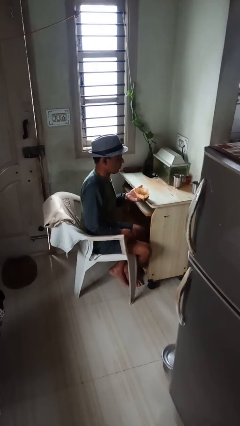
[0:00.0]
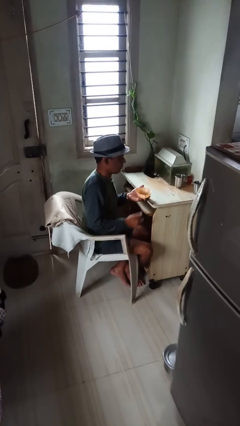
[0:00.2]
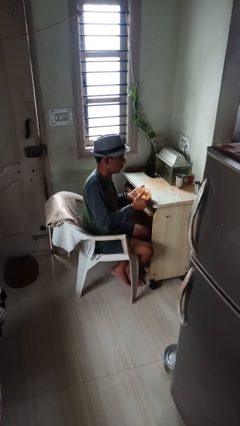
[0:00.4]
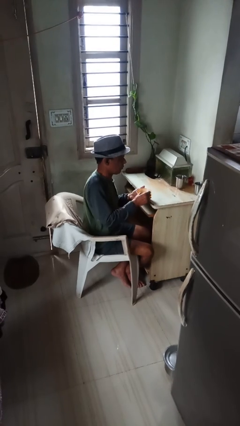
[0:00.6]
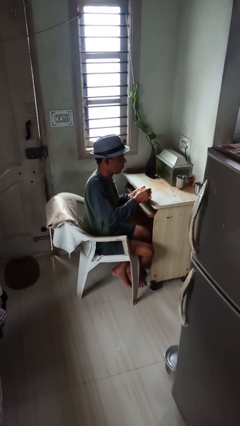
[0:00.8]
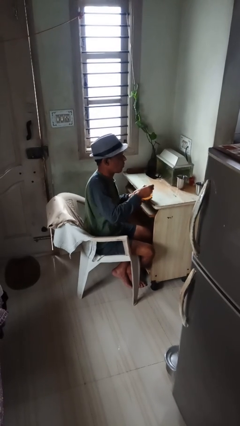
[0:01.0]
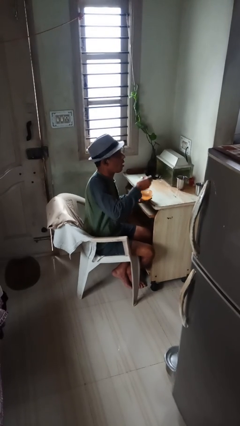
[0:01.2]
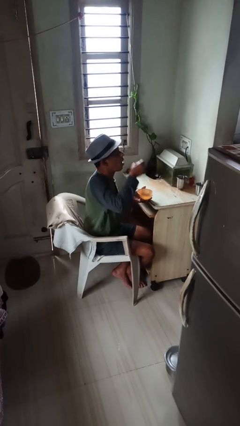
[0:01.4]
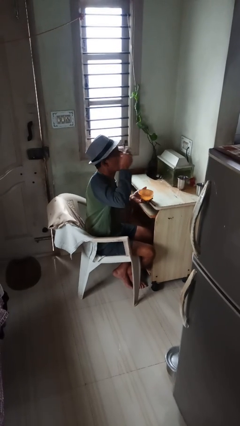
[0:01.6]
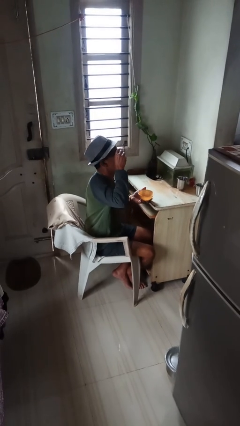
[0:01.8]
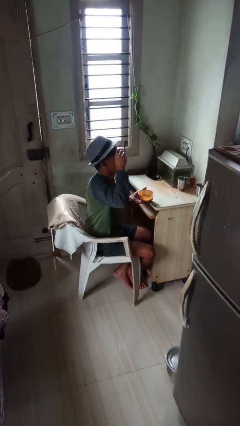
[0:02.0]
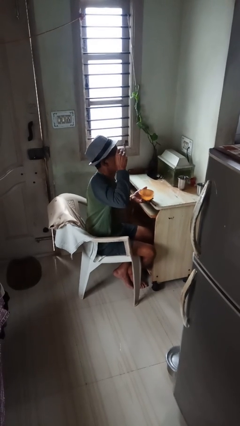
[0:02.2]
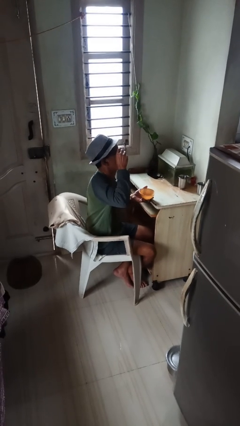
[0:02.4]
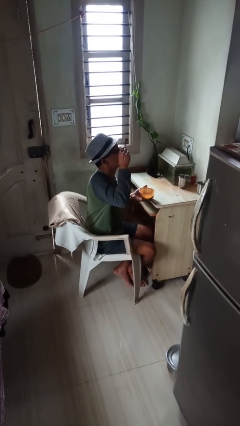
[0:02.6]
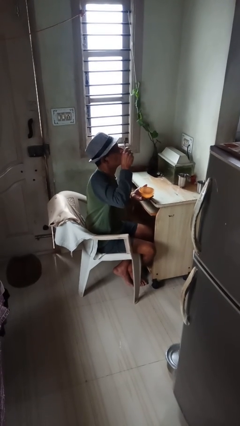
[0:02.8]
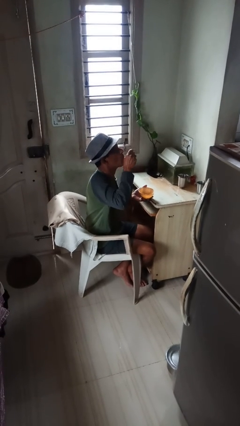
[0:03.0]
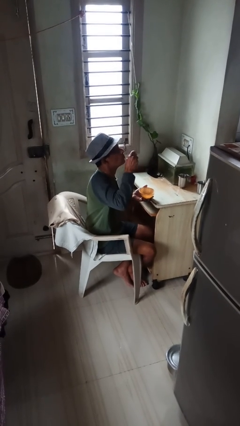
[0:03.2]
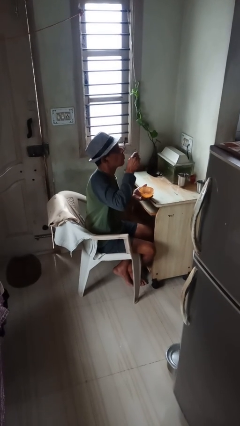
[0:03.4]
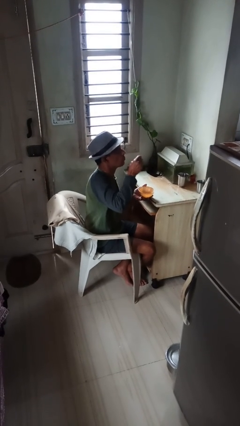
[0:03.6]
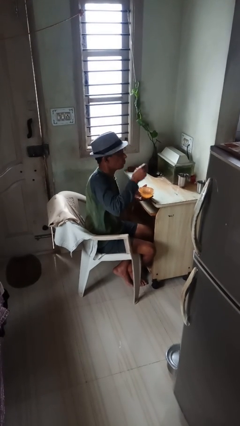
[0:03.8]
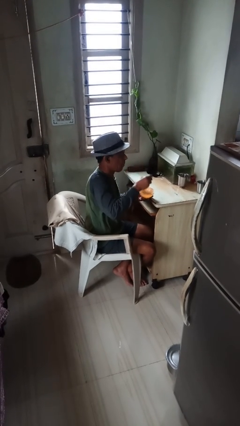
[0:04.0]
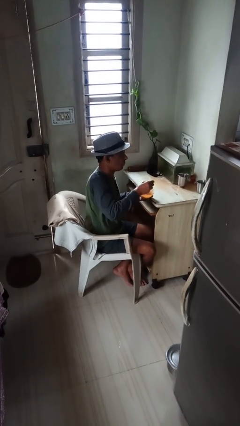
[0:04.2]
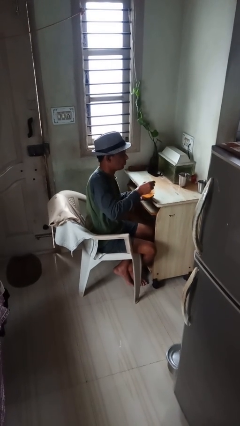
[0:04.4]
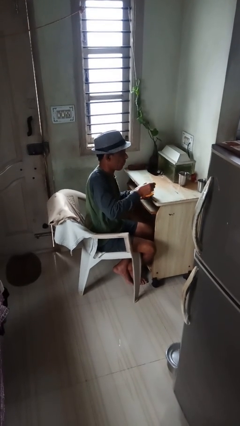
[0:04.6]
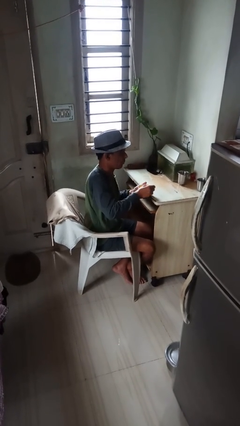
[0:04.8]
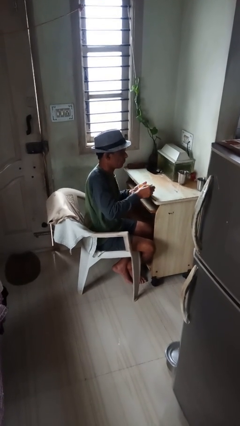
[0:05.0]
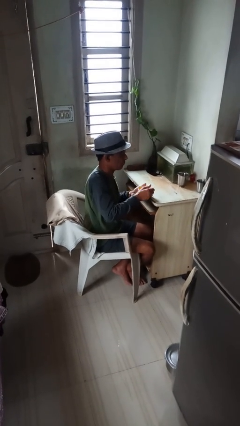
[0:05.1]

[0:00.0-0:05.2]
person eats with utensil

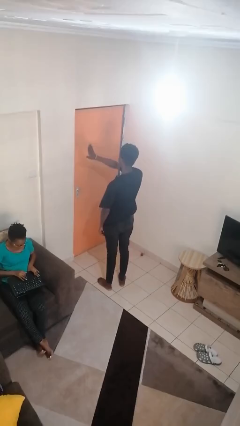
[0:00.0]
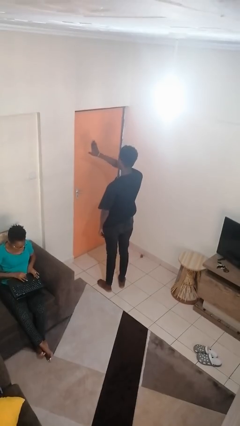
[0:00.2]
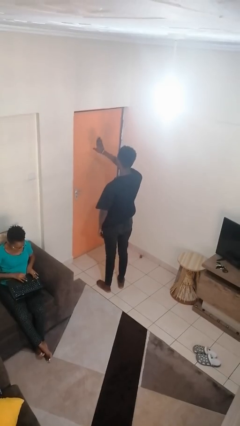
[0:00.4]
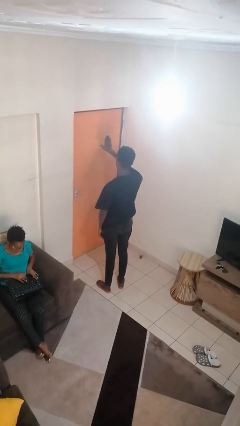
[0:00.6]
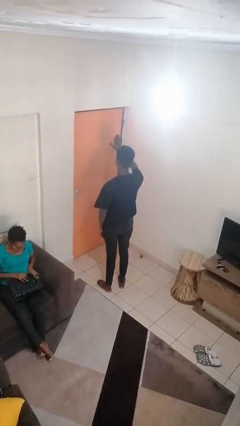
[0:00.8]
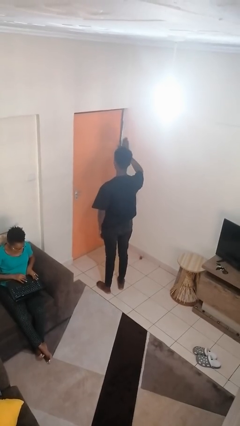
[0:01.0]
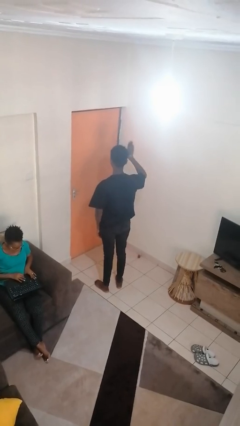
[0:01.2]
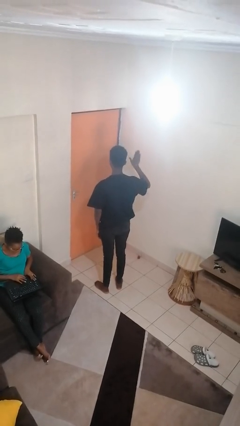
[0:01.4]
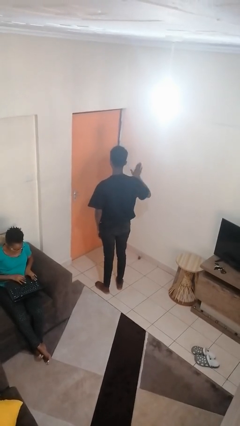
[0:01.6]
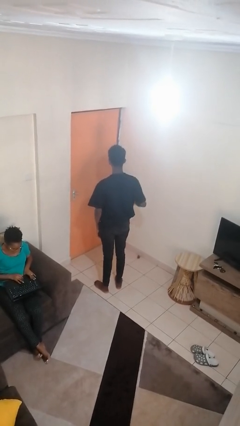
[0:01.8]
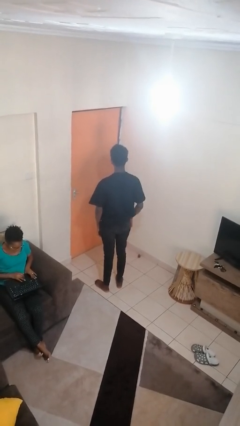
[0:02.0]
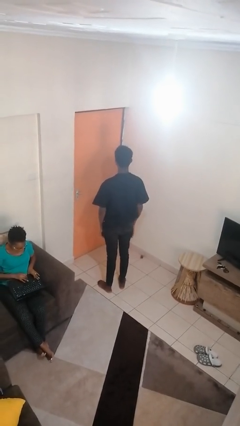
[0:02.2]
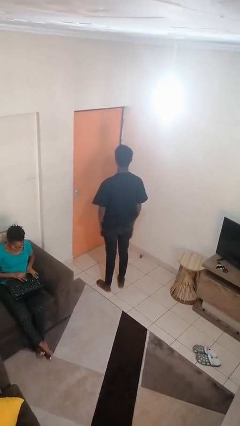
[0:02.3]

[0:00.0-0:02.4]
person gestures swipe right

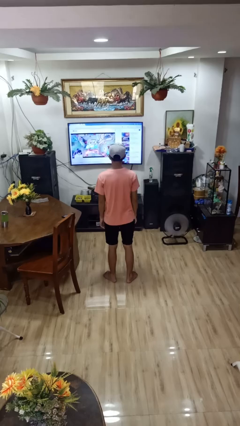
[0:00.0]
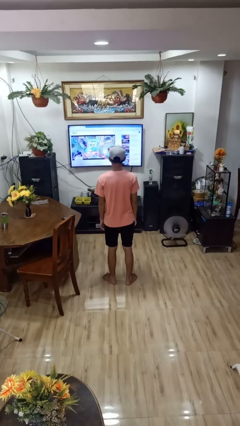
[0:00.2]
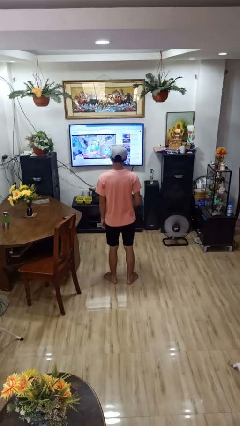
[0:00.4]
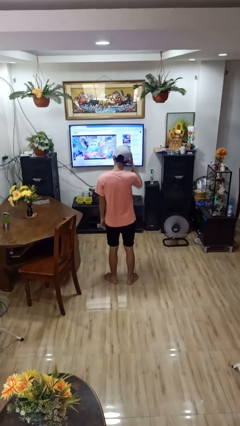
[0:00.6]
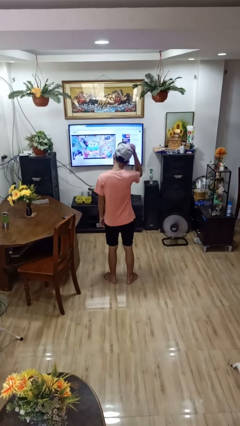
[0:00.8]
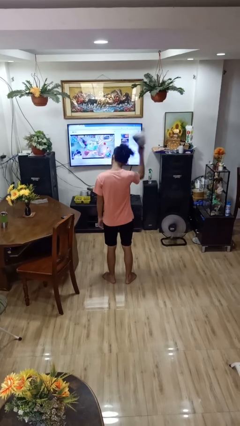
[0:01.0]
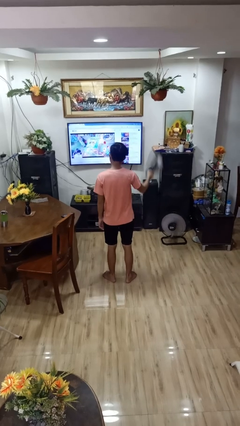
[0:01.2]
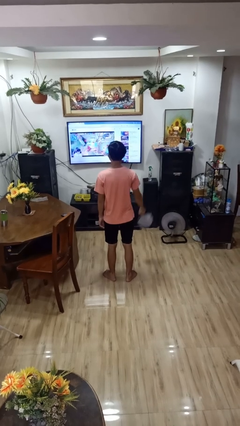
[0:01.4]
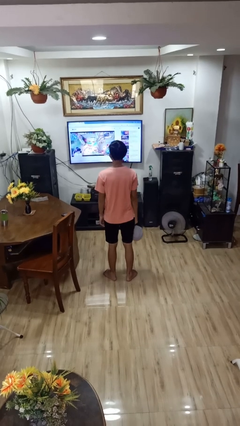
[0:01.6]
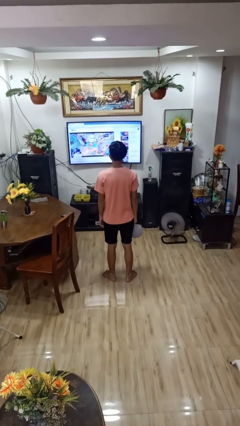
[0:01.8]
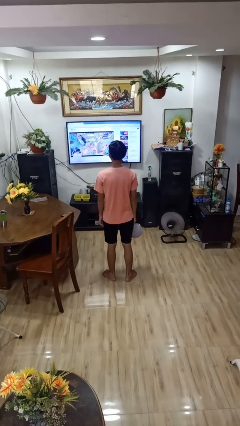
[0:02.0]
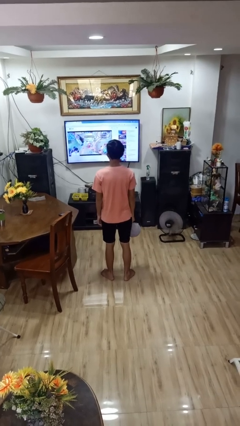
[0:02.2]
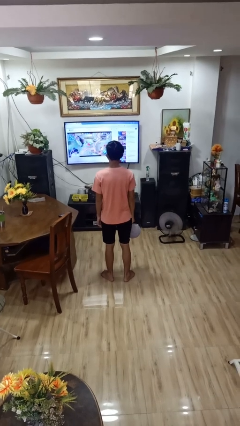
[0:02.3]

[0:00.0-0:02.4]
person takes off hat

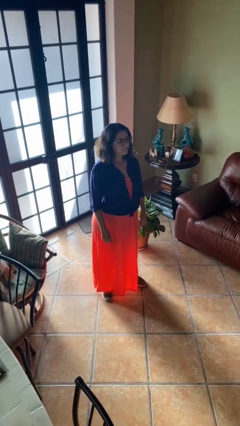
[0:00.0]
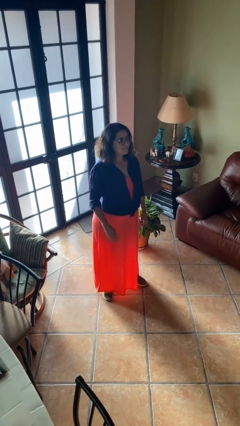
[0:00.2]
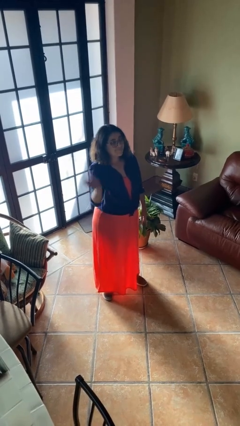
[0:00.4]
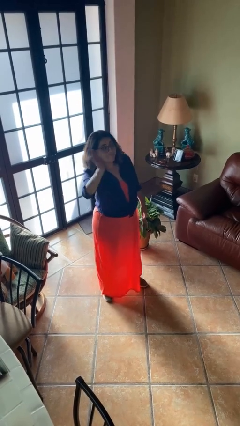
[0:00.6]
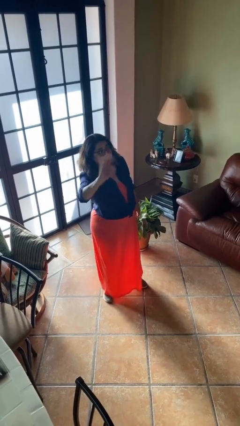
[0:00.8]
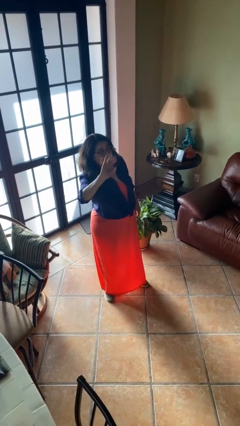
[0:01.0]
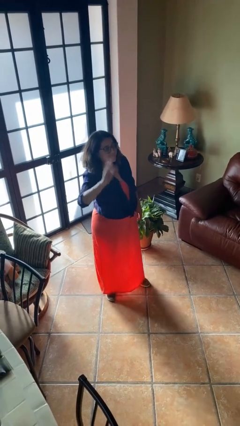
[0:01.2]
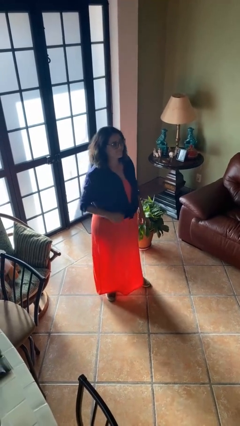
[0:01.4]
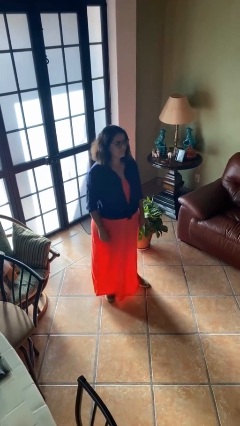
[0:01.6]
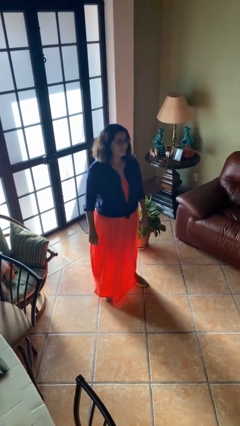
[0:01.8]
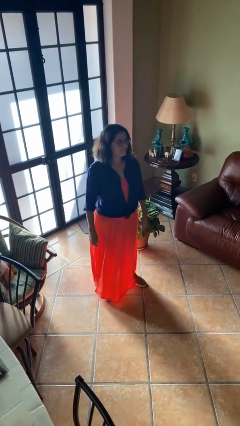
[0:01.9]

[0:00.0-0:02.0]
person waves at person

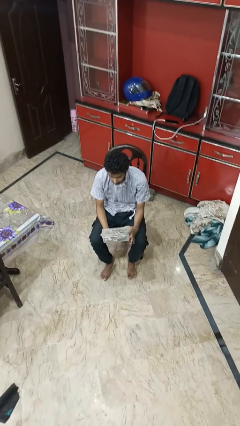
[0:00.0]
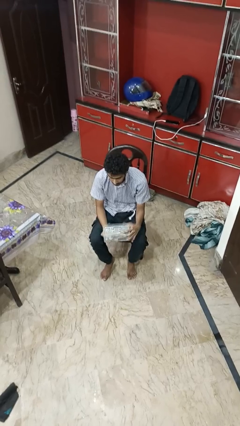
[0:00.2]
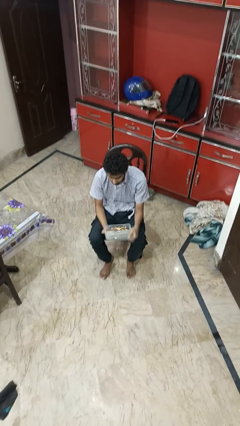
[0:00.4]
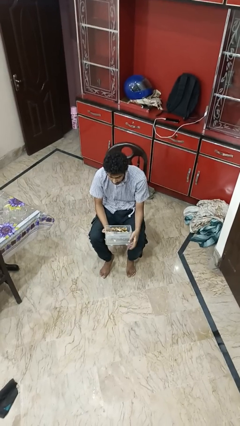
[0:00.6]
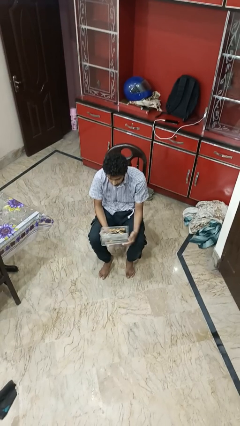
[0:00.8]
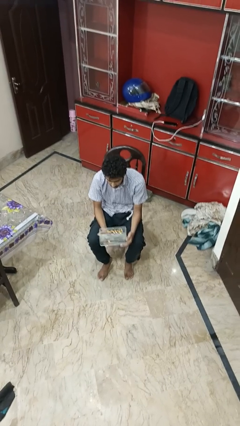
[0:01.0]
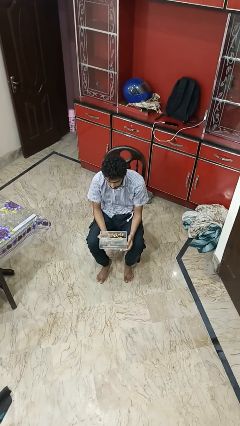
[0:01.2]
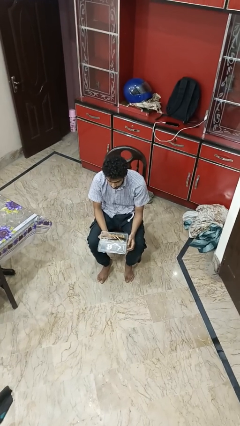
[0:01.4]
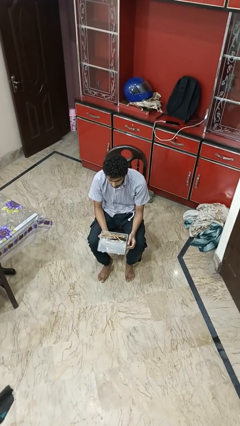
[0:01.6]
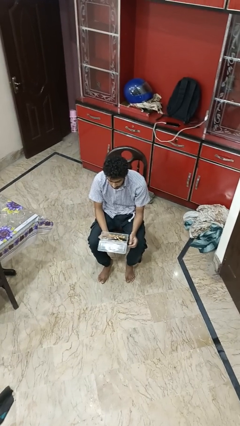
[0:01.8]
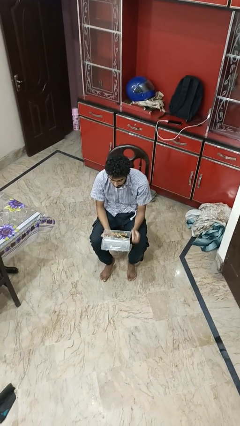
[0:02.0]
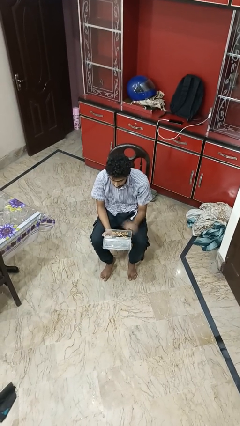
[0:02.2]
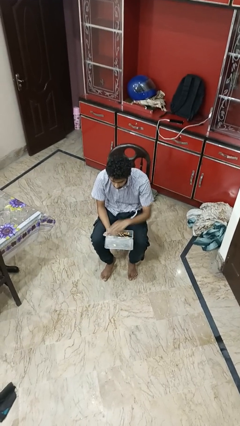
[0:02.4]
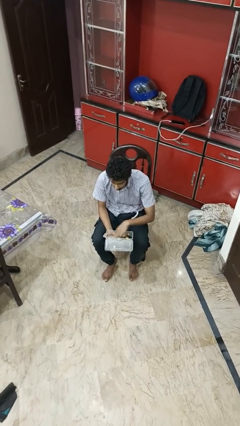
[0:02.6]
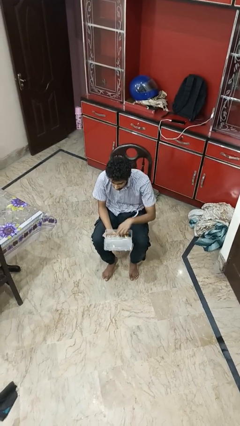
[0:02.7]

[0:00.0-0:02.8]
person opens jewelry box

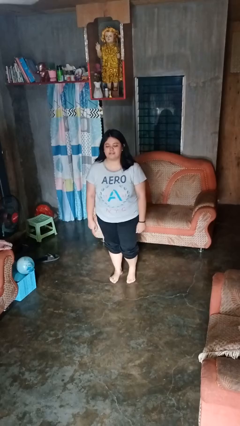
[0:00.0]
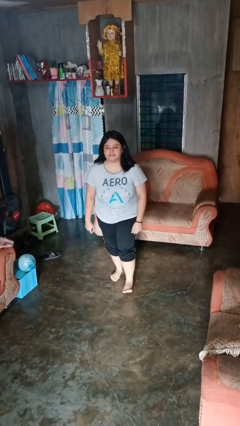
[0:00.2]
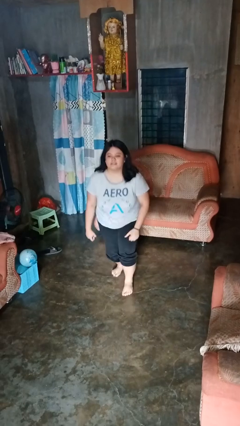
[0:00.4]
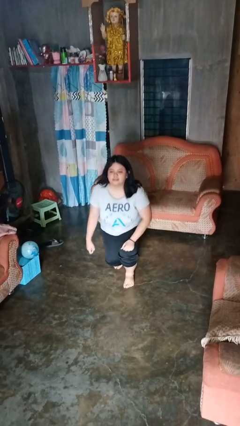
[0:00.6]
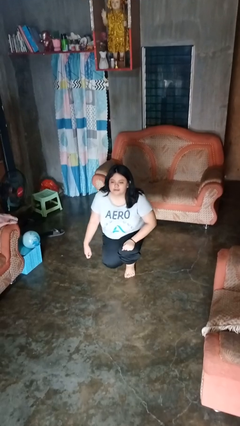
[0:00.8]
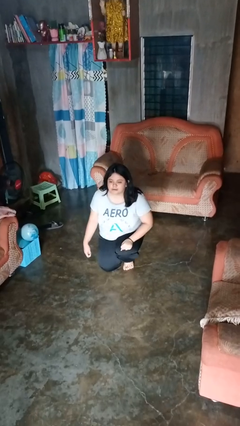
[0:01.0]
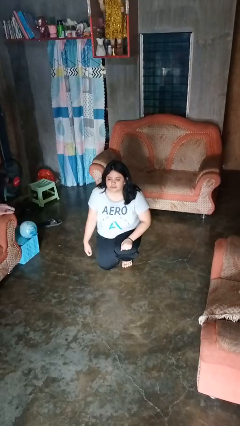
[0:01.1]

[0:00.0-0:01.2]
person kneels

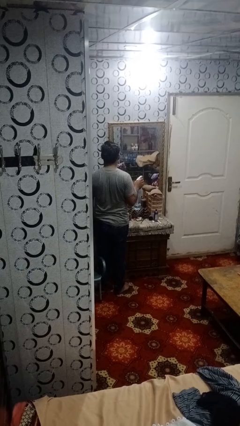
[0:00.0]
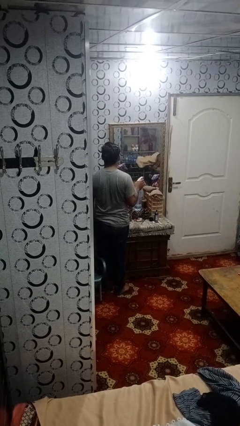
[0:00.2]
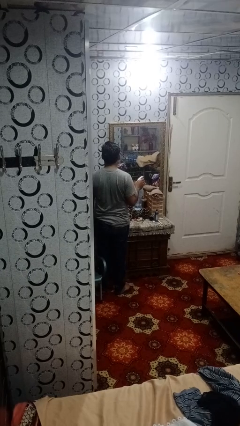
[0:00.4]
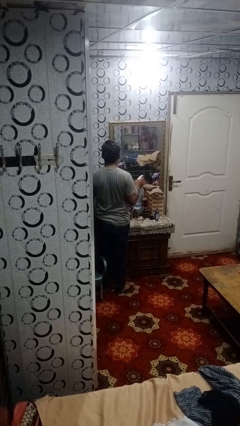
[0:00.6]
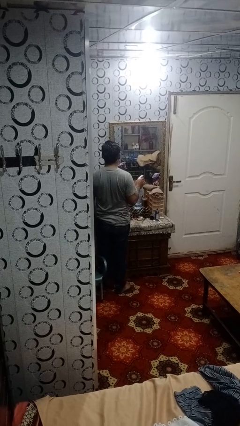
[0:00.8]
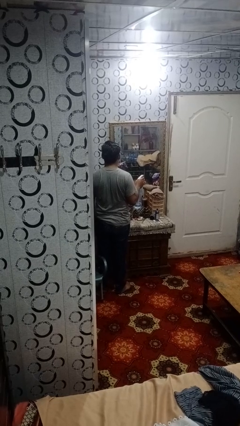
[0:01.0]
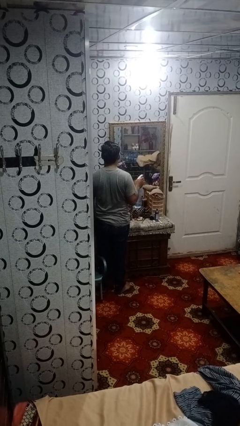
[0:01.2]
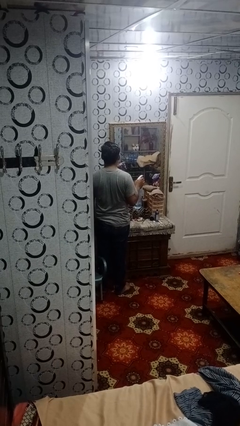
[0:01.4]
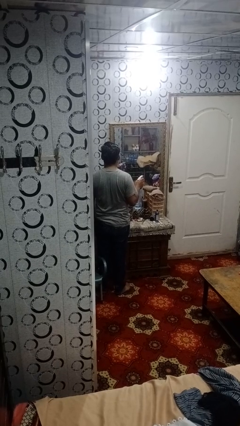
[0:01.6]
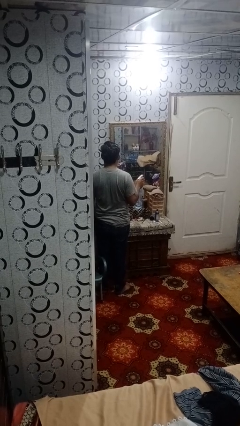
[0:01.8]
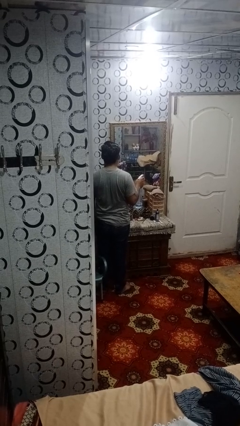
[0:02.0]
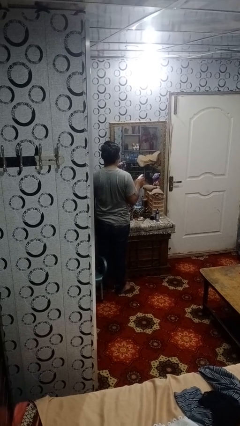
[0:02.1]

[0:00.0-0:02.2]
person sprays from bottle
